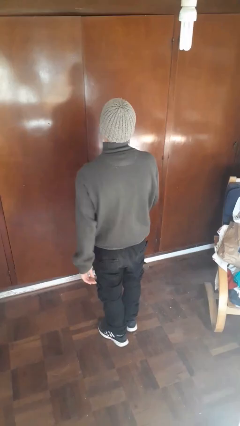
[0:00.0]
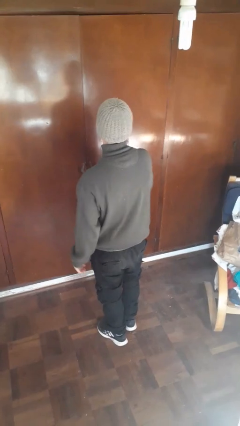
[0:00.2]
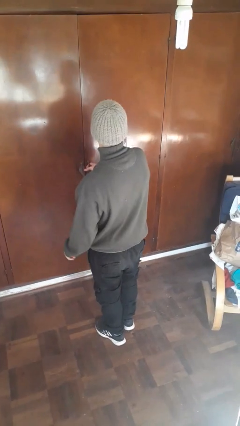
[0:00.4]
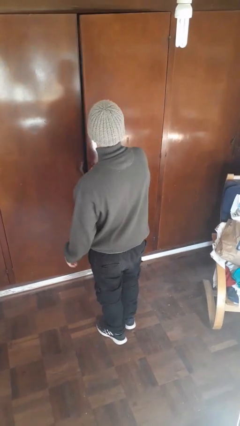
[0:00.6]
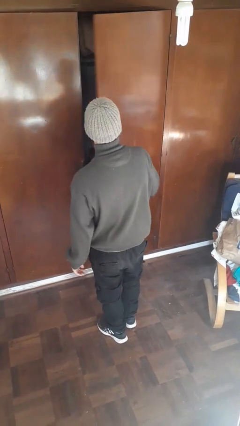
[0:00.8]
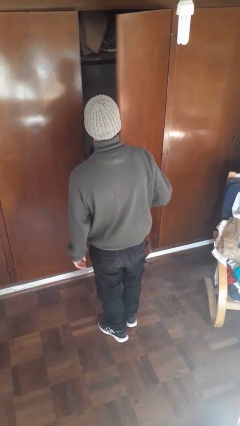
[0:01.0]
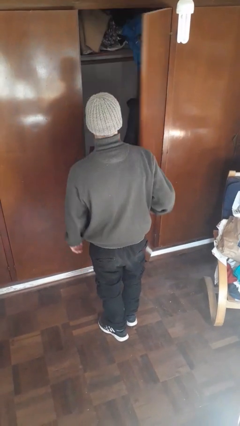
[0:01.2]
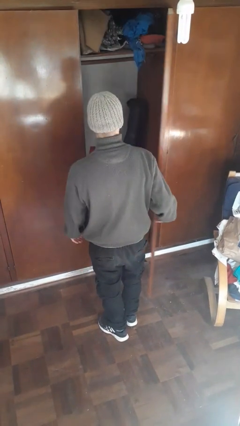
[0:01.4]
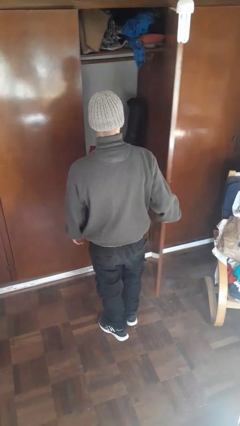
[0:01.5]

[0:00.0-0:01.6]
person opens closet door

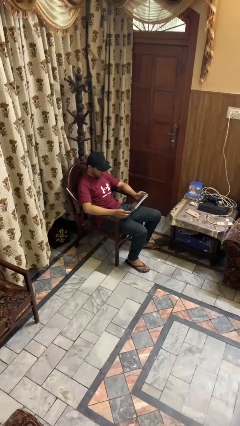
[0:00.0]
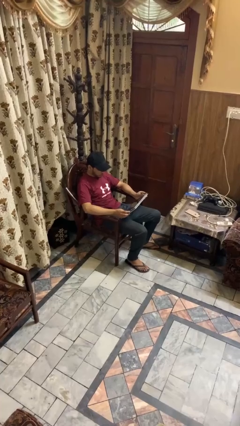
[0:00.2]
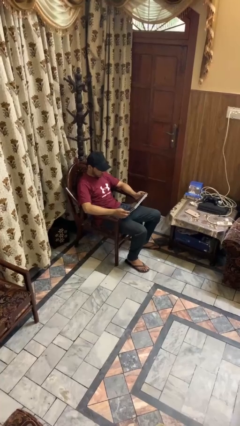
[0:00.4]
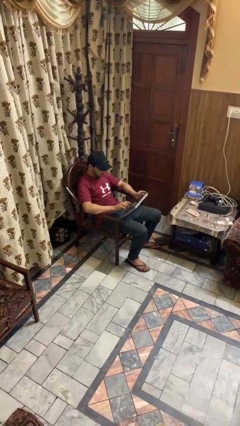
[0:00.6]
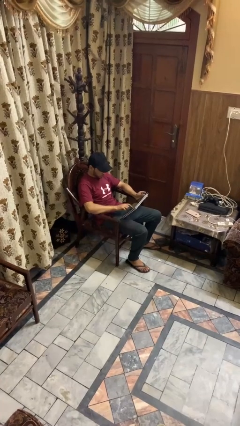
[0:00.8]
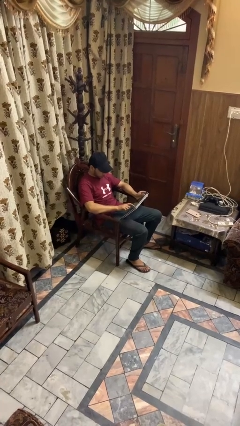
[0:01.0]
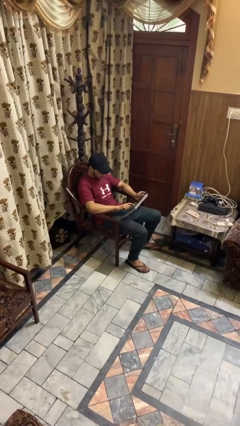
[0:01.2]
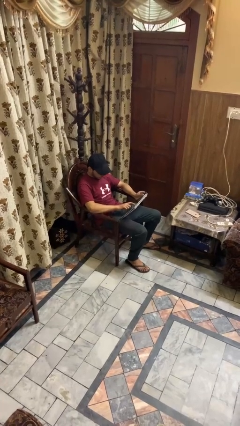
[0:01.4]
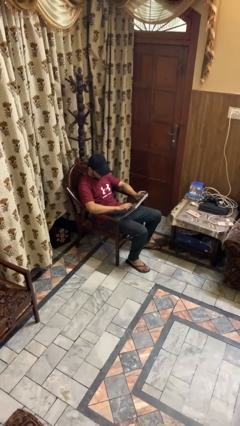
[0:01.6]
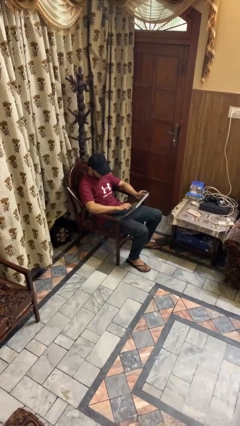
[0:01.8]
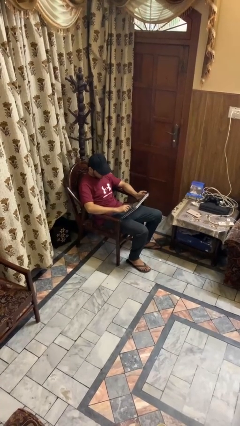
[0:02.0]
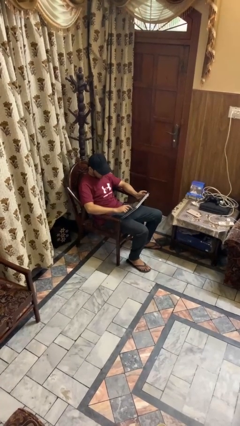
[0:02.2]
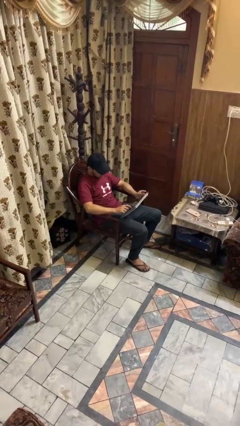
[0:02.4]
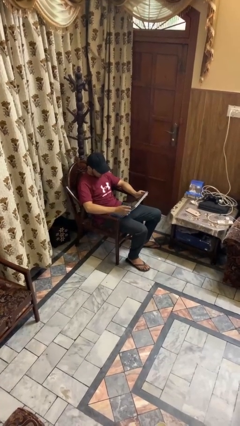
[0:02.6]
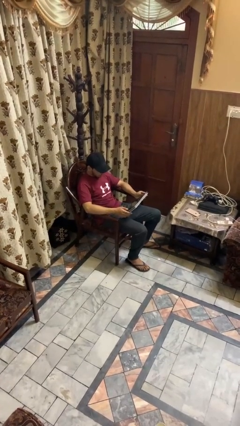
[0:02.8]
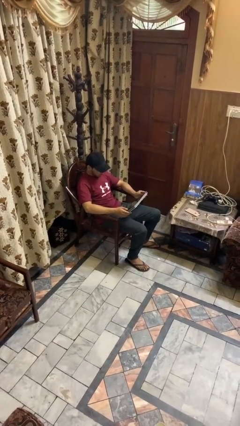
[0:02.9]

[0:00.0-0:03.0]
person interacts with tablet

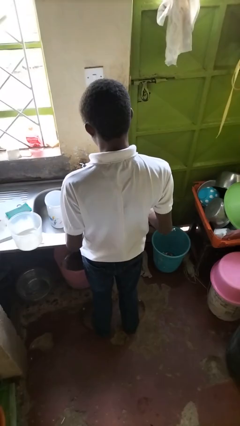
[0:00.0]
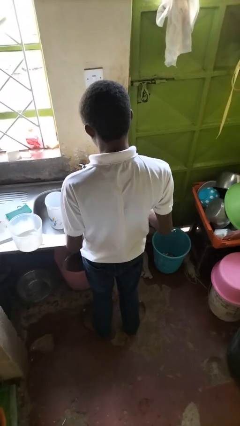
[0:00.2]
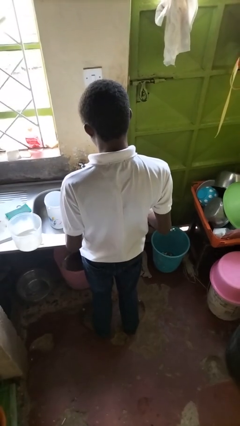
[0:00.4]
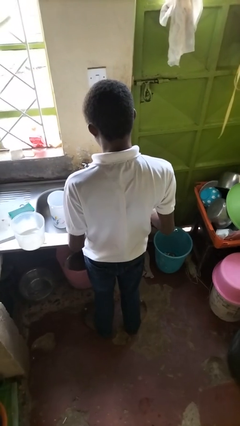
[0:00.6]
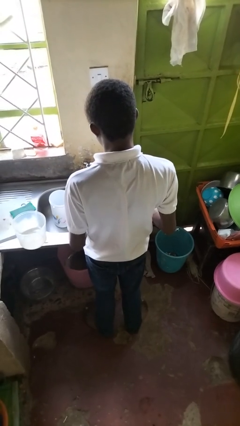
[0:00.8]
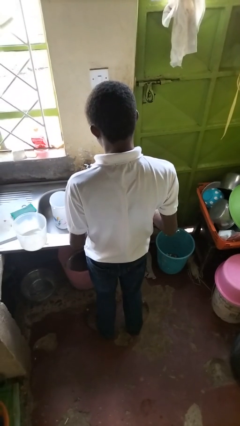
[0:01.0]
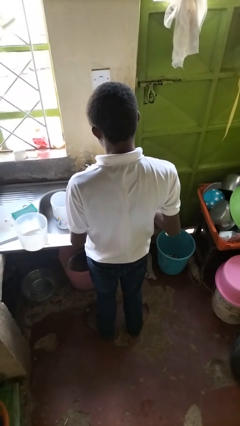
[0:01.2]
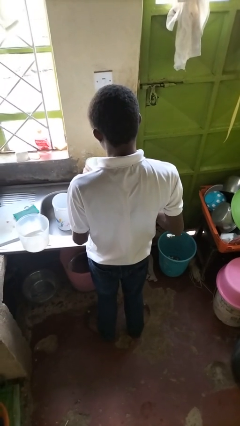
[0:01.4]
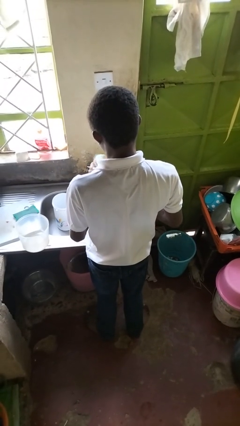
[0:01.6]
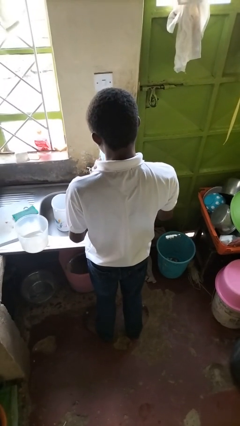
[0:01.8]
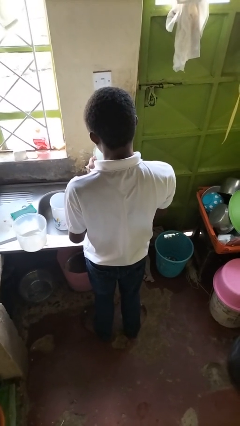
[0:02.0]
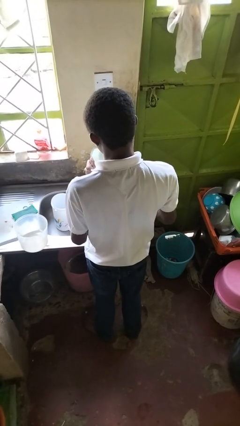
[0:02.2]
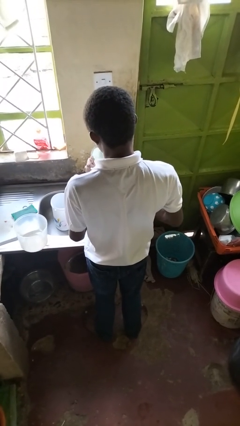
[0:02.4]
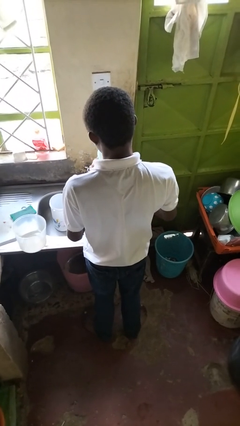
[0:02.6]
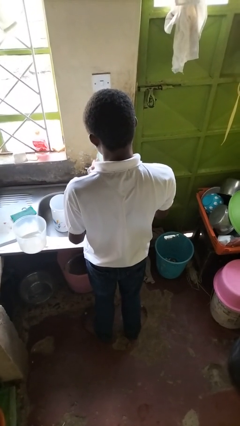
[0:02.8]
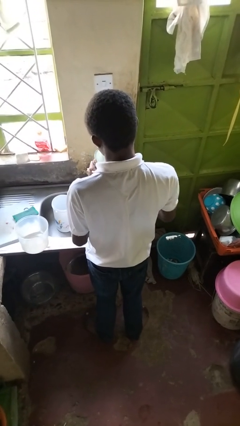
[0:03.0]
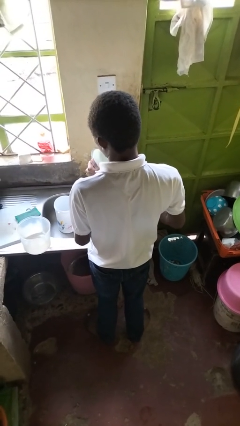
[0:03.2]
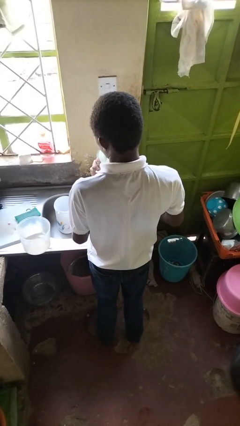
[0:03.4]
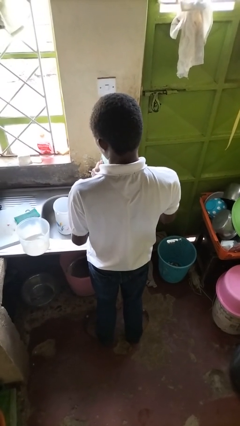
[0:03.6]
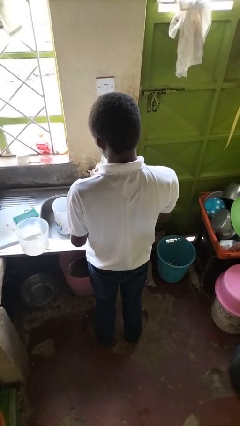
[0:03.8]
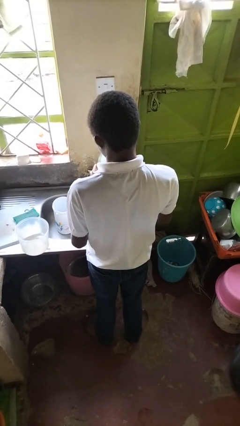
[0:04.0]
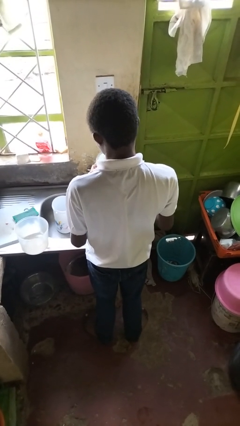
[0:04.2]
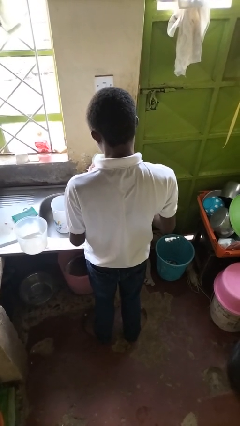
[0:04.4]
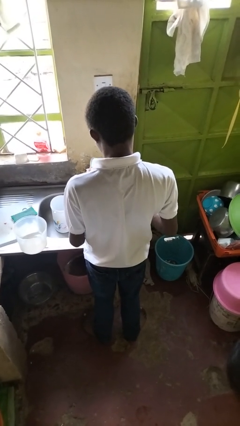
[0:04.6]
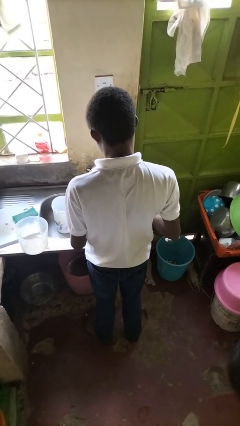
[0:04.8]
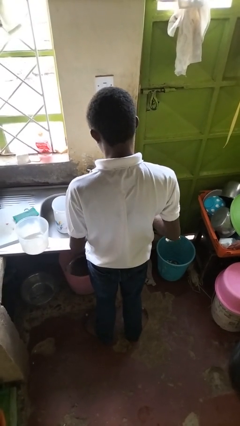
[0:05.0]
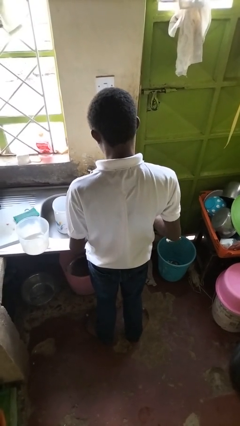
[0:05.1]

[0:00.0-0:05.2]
person dries dish

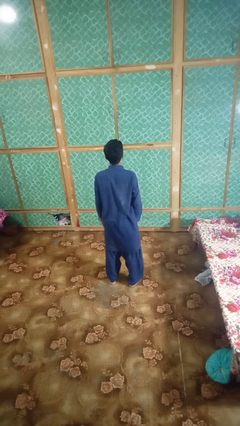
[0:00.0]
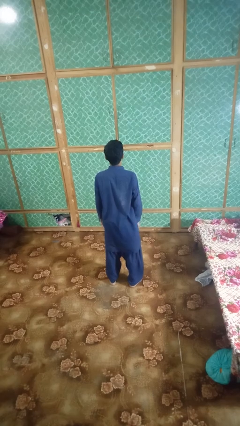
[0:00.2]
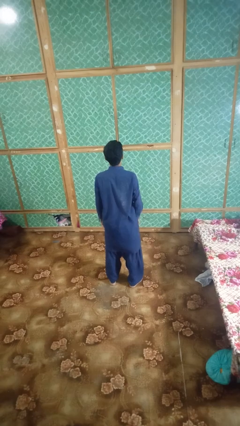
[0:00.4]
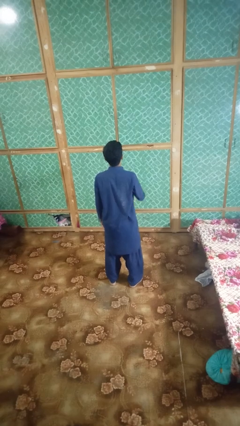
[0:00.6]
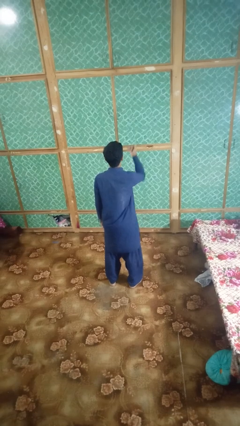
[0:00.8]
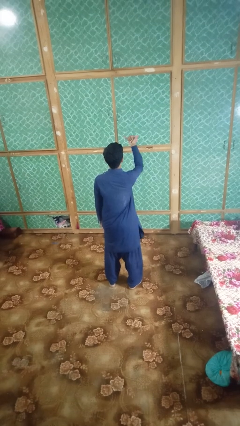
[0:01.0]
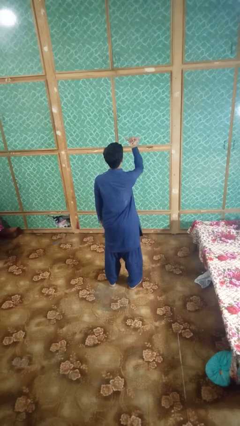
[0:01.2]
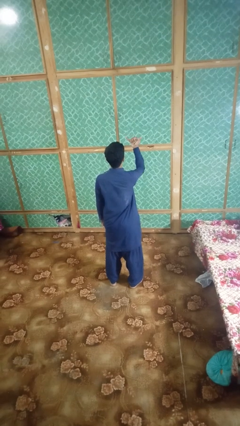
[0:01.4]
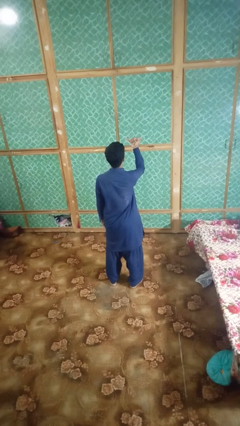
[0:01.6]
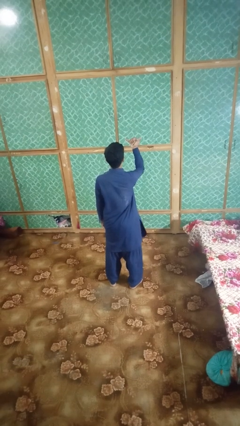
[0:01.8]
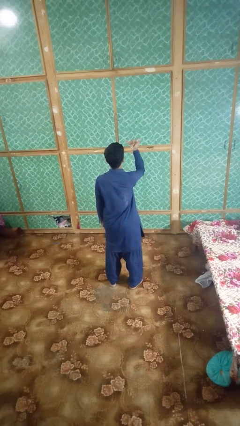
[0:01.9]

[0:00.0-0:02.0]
person gestures hang loose

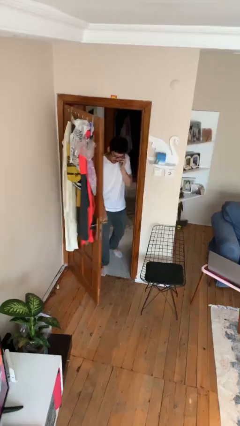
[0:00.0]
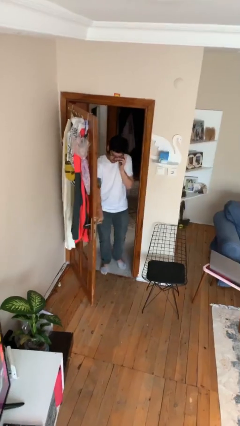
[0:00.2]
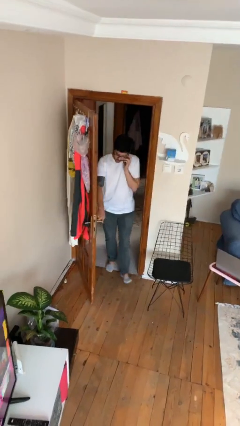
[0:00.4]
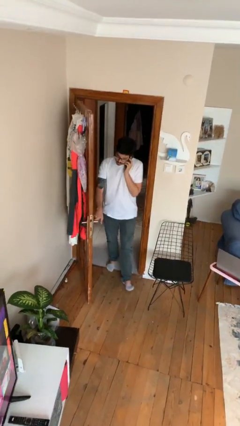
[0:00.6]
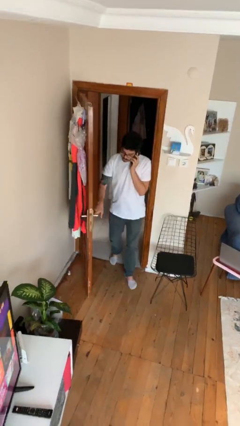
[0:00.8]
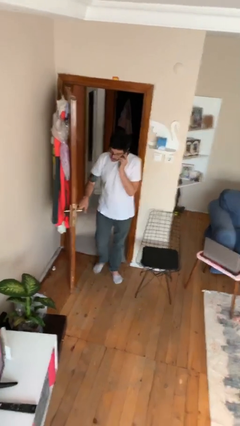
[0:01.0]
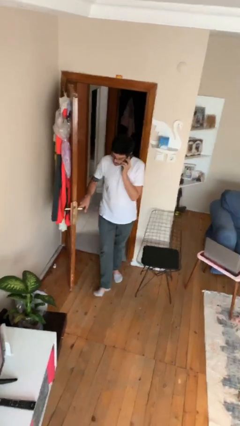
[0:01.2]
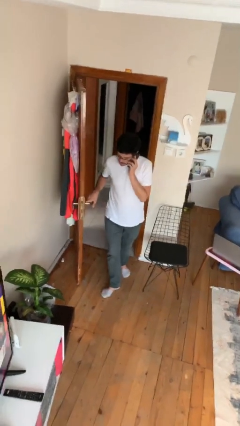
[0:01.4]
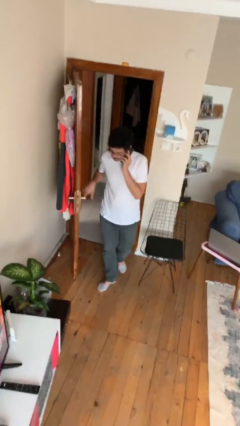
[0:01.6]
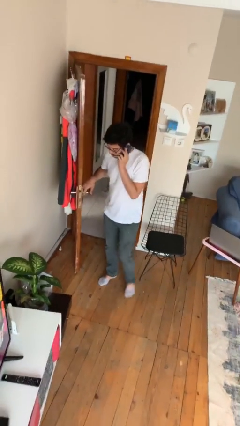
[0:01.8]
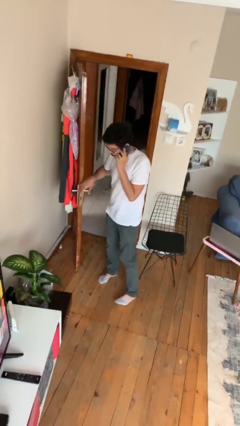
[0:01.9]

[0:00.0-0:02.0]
person enters scene through structure

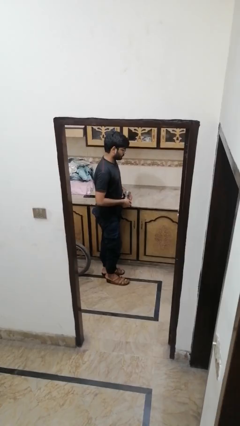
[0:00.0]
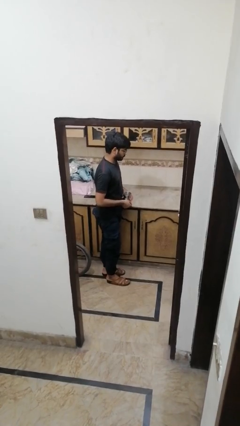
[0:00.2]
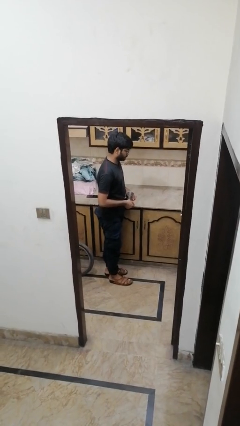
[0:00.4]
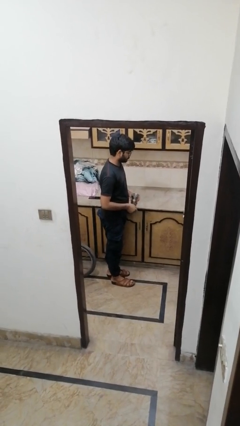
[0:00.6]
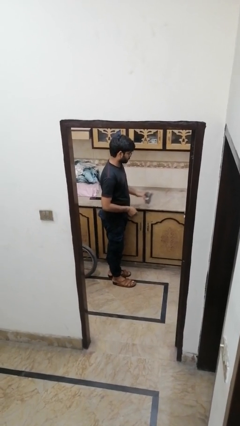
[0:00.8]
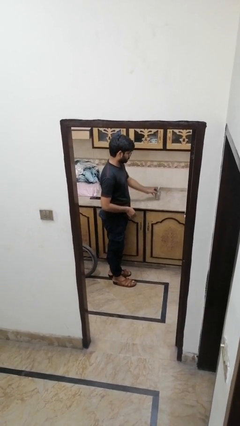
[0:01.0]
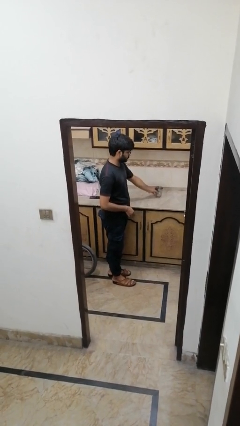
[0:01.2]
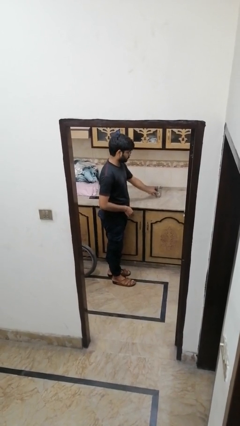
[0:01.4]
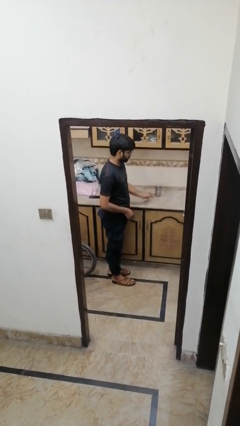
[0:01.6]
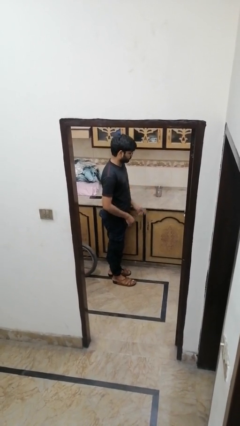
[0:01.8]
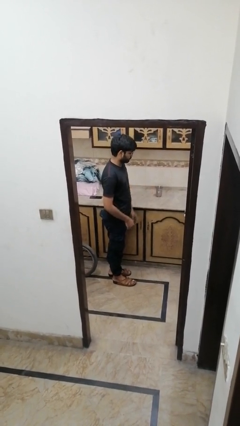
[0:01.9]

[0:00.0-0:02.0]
person puts down object on countertop

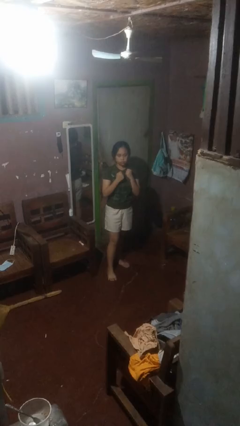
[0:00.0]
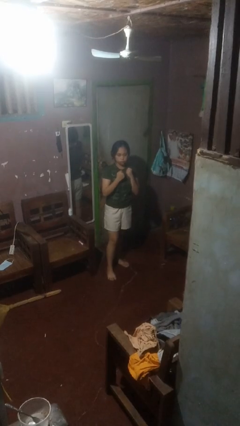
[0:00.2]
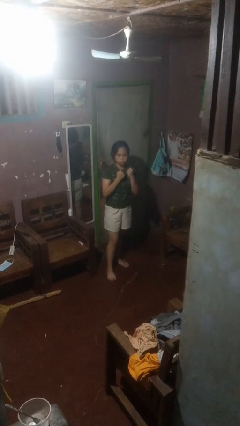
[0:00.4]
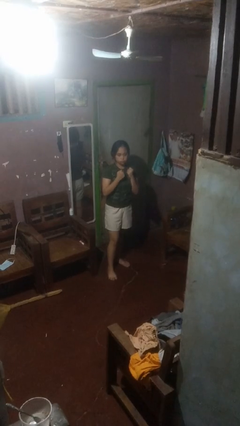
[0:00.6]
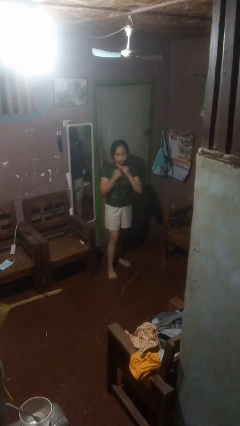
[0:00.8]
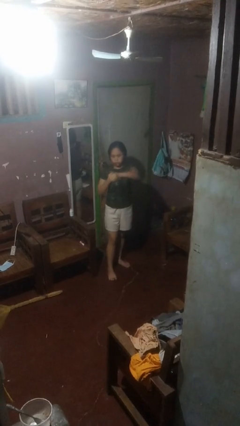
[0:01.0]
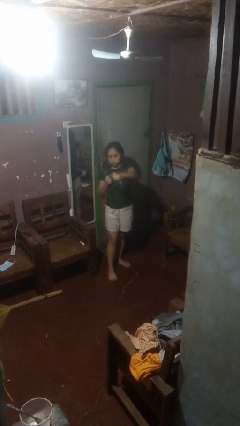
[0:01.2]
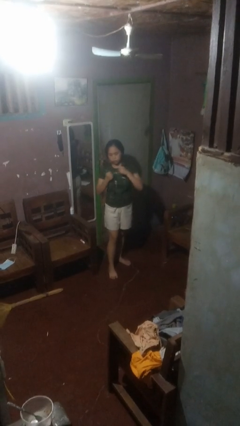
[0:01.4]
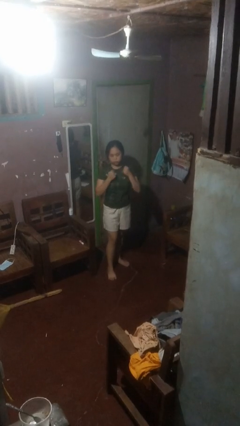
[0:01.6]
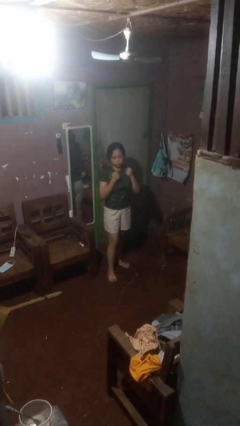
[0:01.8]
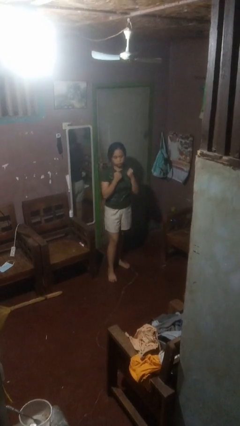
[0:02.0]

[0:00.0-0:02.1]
person punches
